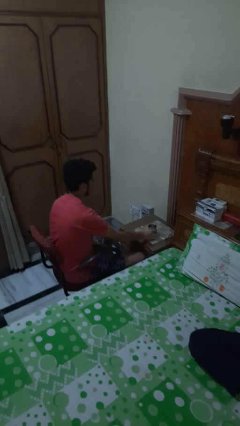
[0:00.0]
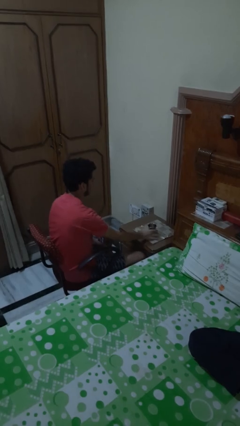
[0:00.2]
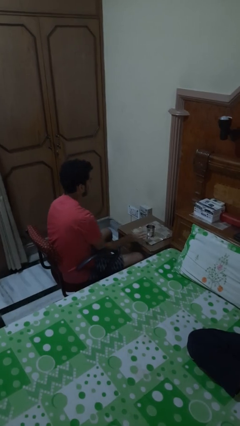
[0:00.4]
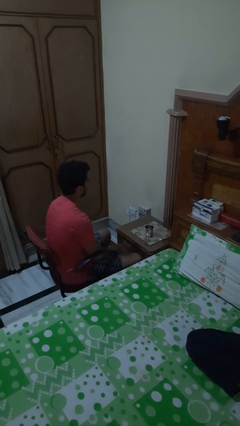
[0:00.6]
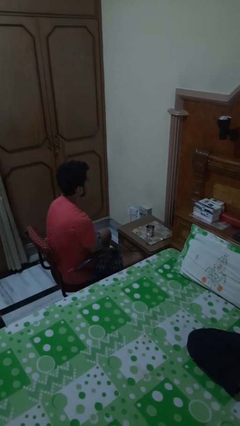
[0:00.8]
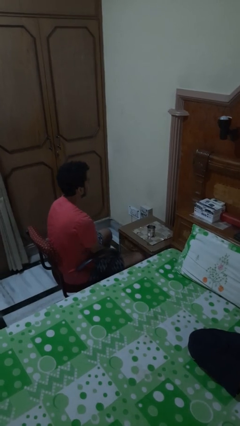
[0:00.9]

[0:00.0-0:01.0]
person sets upright glass

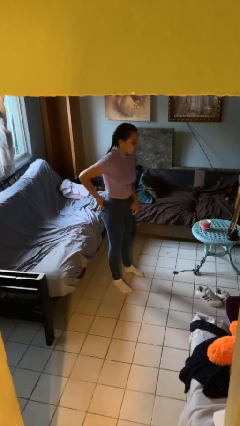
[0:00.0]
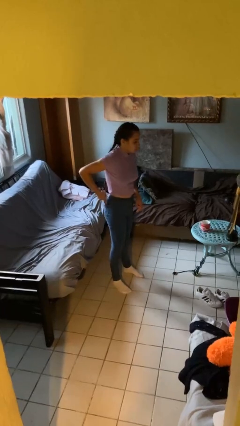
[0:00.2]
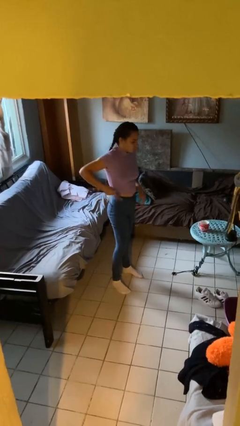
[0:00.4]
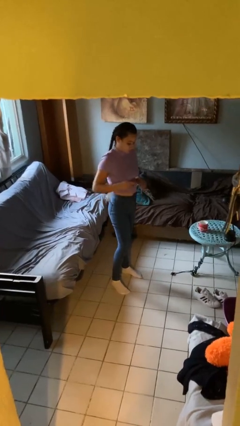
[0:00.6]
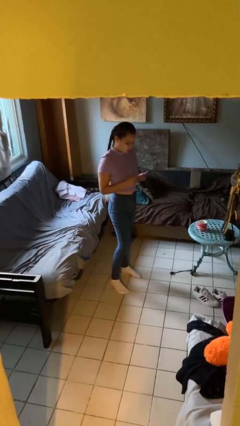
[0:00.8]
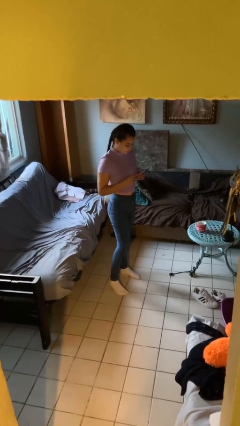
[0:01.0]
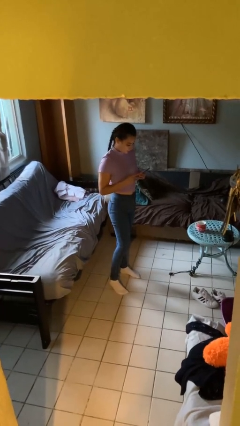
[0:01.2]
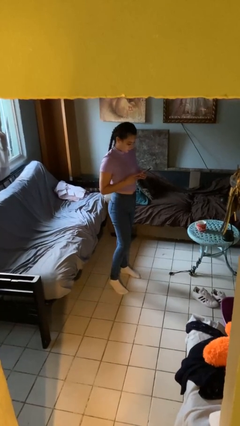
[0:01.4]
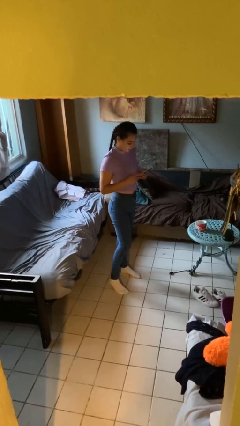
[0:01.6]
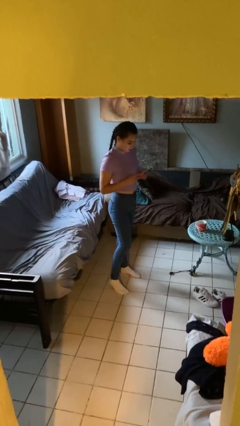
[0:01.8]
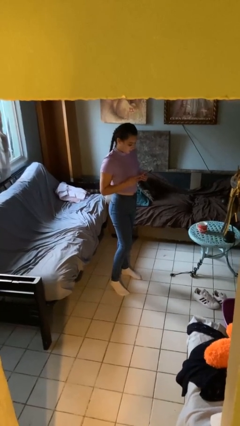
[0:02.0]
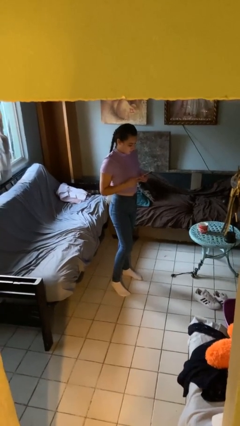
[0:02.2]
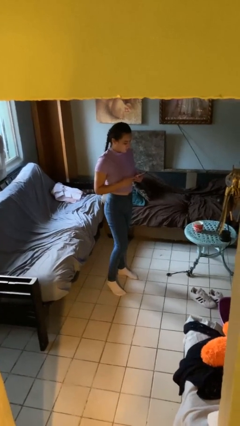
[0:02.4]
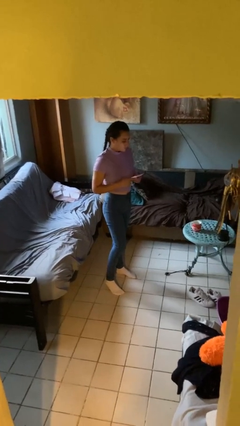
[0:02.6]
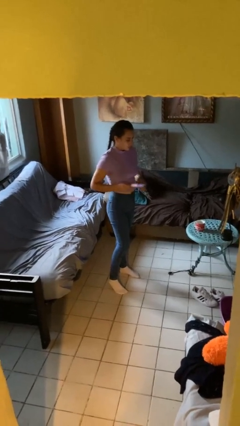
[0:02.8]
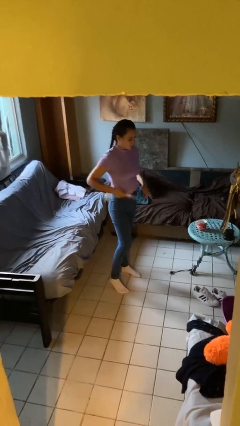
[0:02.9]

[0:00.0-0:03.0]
person takes phone from pocket

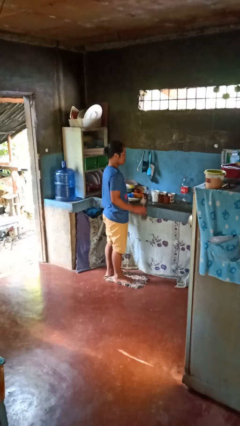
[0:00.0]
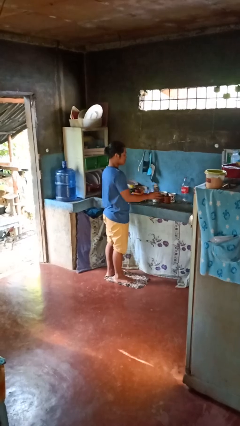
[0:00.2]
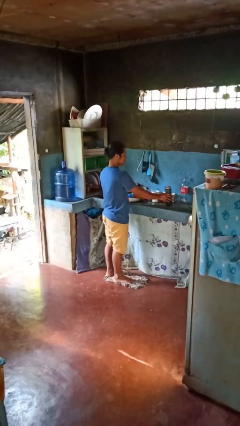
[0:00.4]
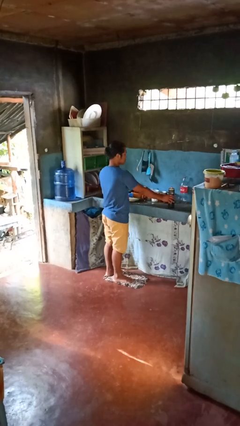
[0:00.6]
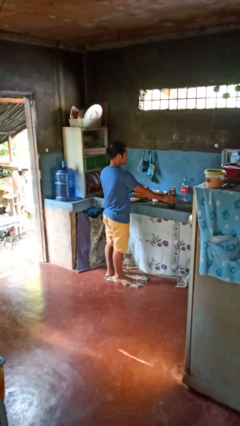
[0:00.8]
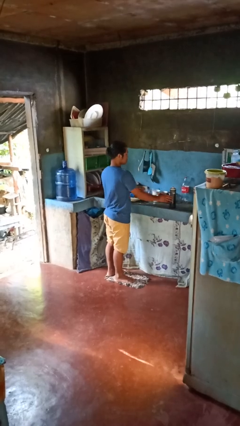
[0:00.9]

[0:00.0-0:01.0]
person puts down object on countertop

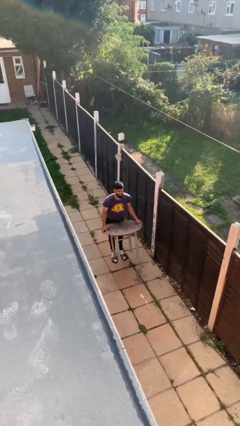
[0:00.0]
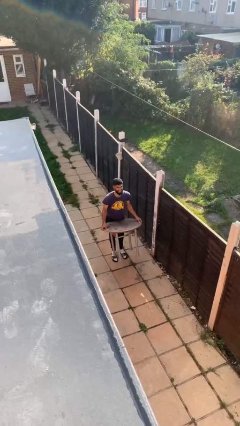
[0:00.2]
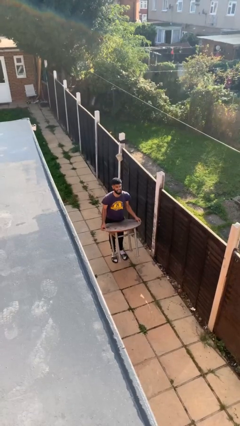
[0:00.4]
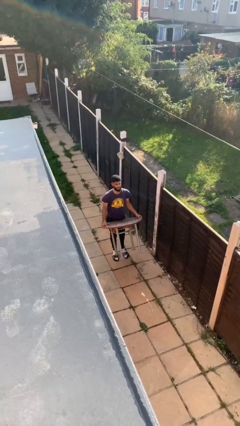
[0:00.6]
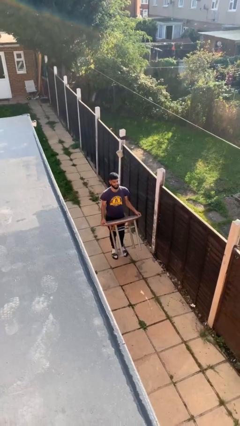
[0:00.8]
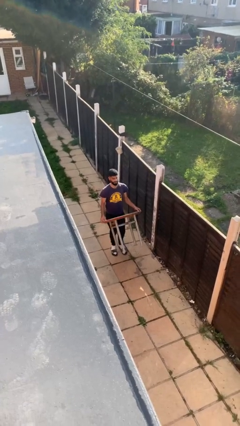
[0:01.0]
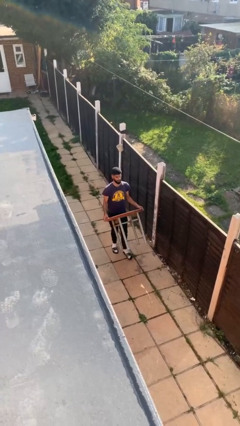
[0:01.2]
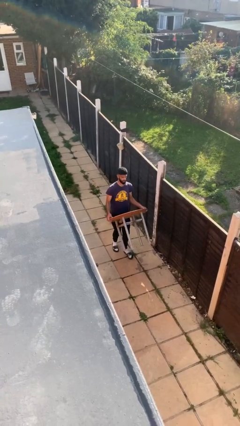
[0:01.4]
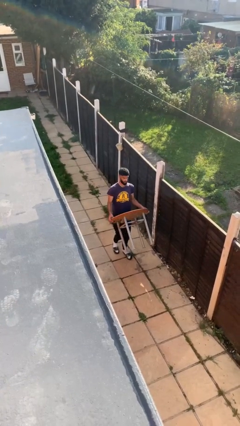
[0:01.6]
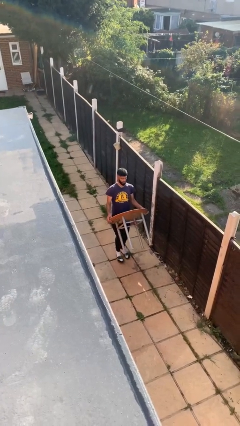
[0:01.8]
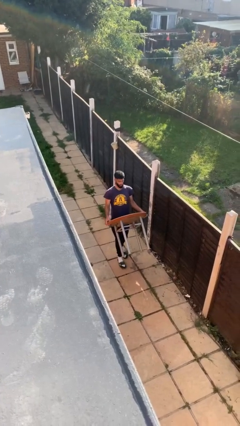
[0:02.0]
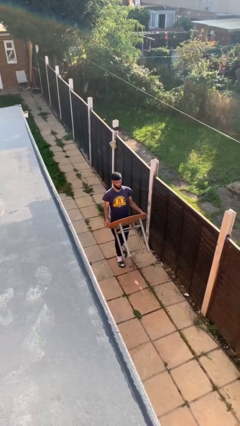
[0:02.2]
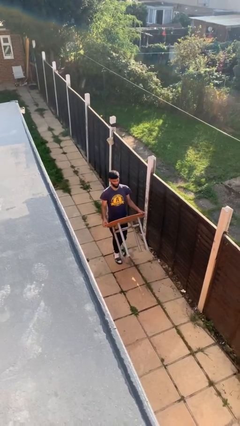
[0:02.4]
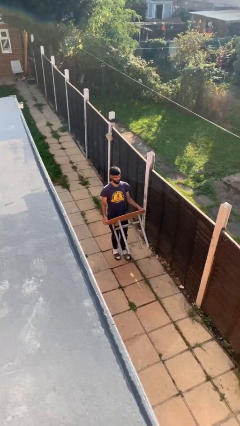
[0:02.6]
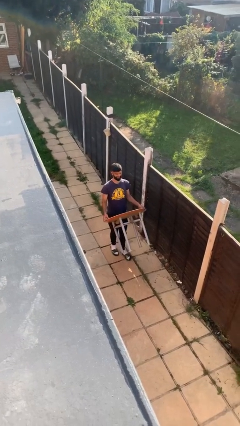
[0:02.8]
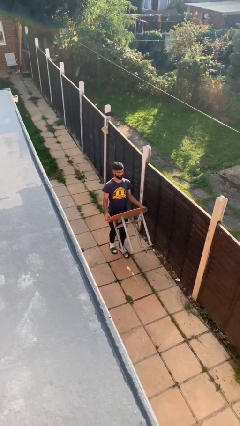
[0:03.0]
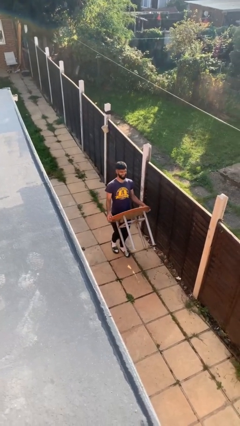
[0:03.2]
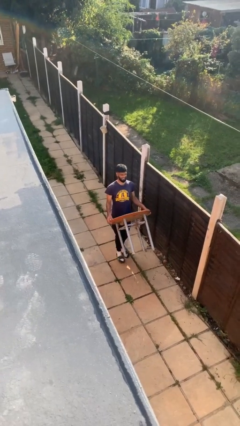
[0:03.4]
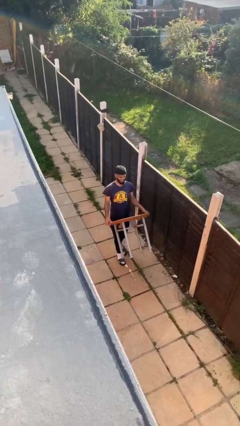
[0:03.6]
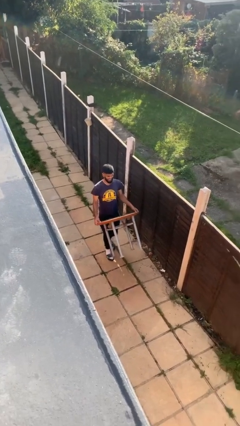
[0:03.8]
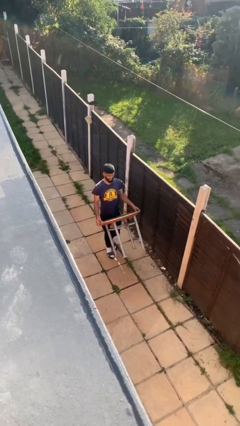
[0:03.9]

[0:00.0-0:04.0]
person carries heavy object

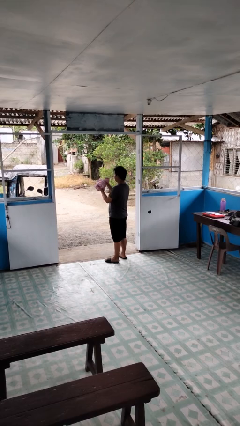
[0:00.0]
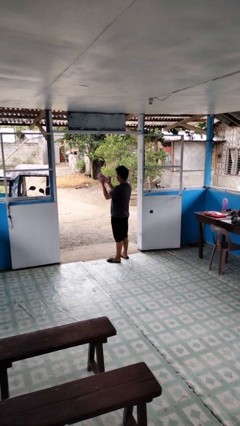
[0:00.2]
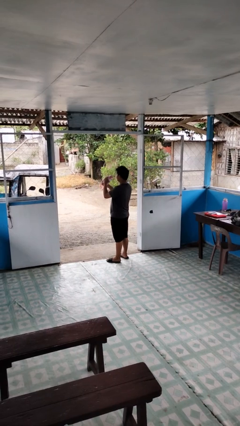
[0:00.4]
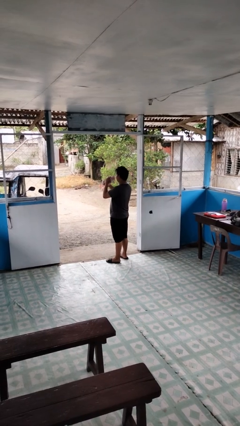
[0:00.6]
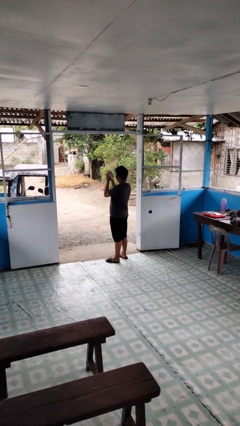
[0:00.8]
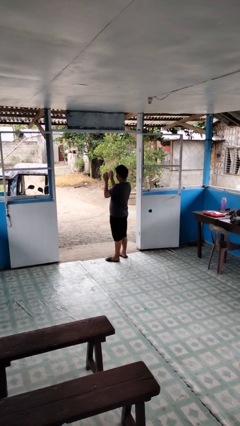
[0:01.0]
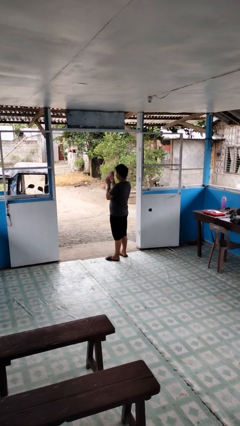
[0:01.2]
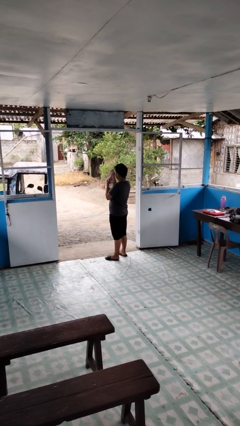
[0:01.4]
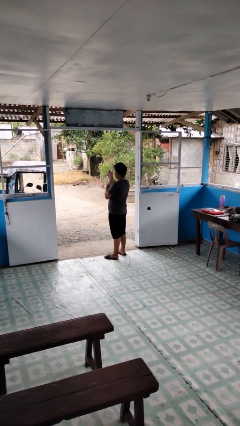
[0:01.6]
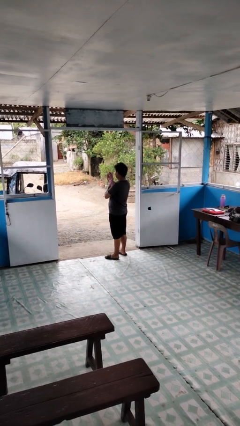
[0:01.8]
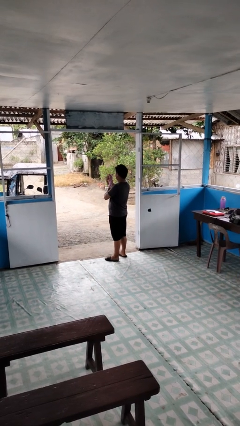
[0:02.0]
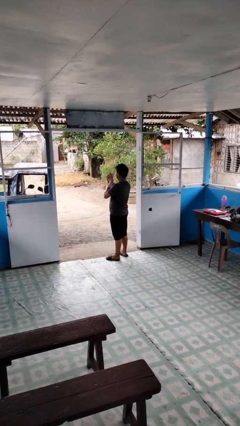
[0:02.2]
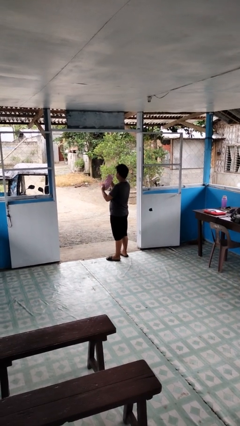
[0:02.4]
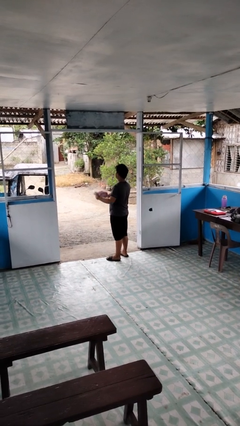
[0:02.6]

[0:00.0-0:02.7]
person squeezes object

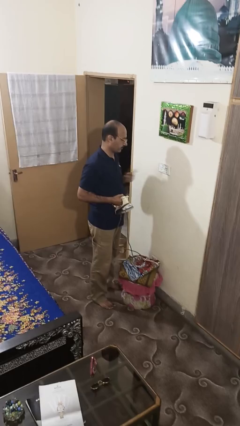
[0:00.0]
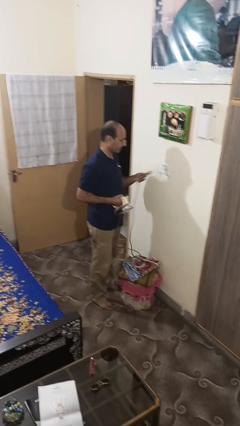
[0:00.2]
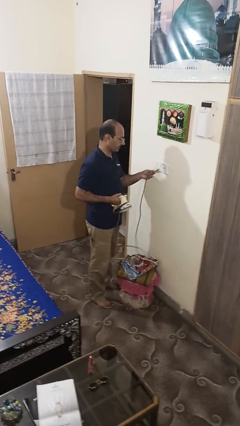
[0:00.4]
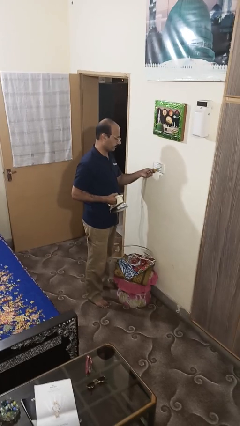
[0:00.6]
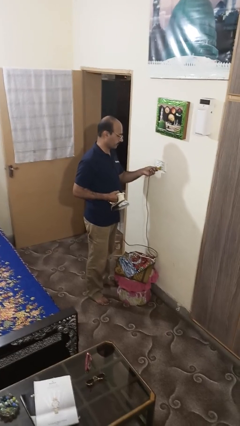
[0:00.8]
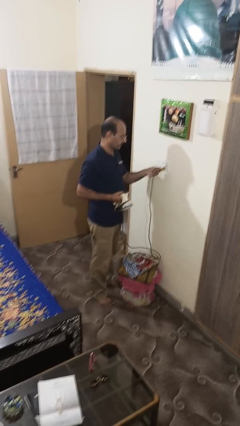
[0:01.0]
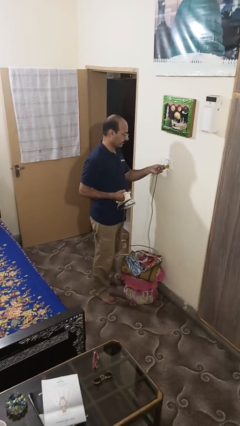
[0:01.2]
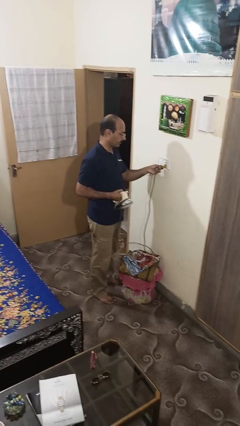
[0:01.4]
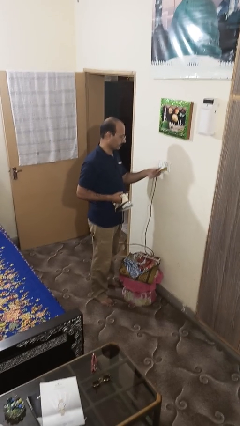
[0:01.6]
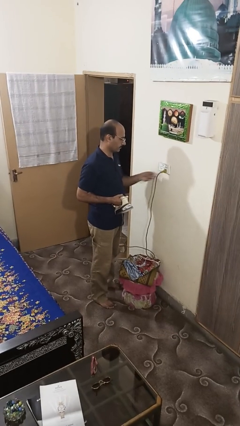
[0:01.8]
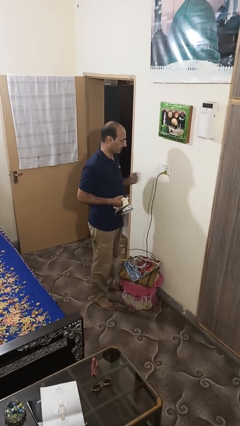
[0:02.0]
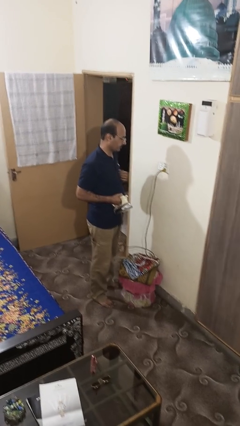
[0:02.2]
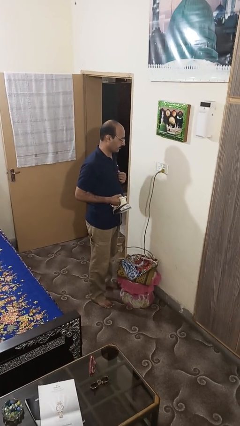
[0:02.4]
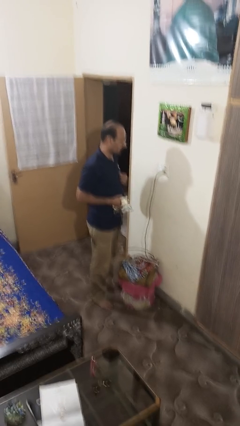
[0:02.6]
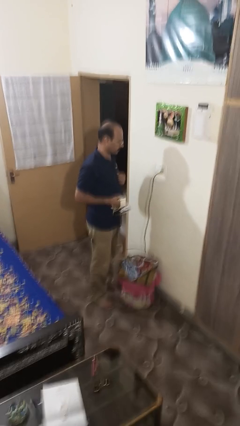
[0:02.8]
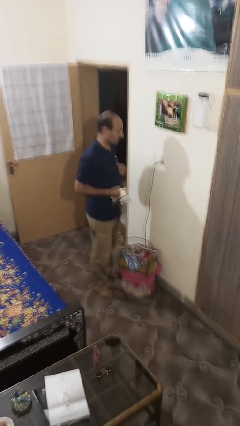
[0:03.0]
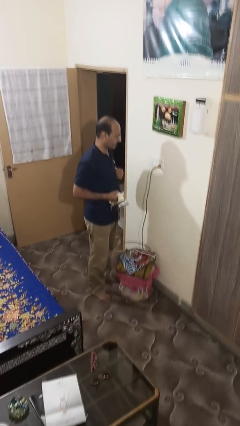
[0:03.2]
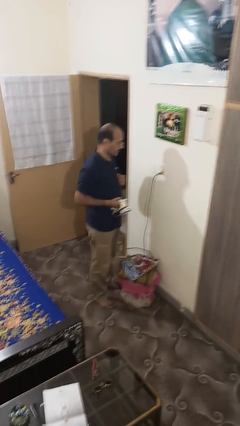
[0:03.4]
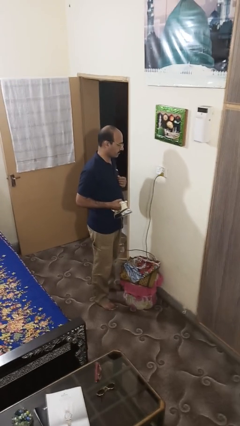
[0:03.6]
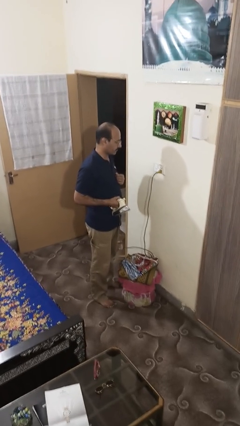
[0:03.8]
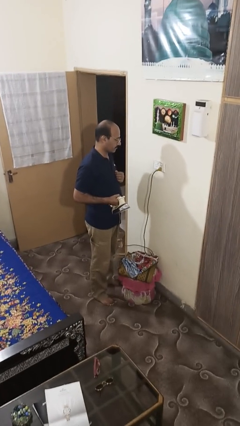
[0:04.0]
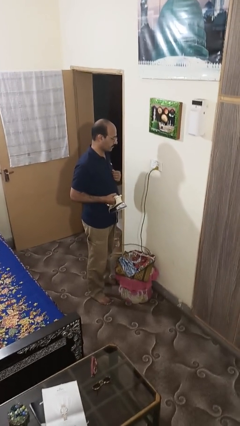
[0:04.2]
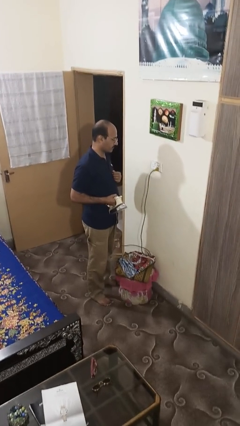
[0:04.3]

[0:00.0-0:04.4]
person plugs into electrical socket

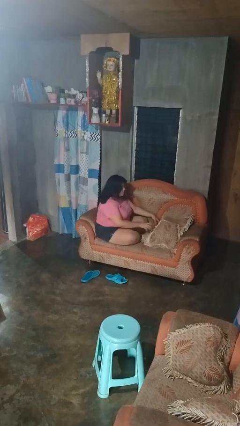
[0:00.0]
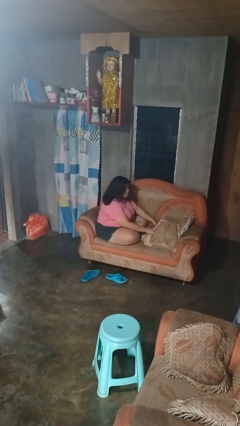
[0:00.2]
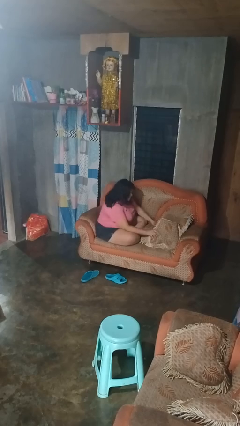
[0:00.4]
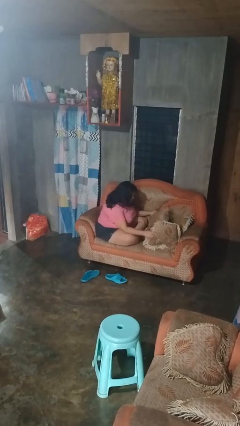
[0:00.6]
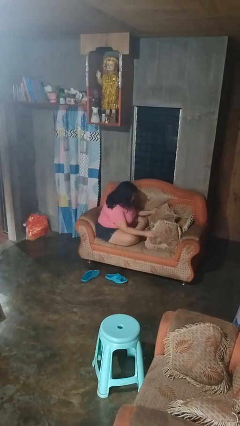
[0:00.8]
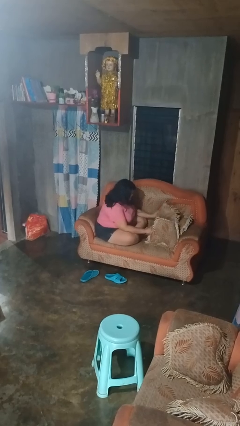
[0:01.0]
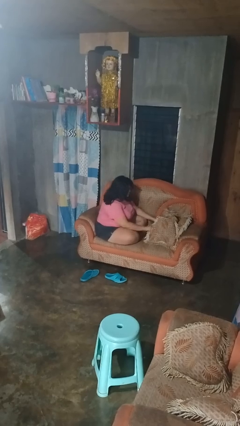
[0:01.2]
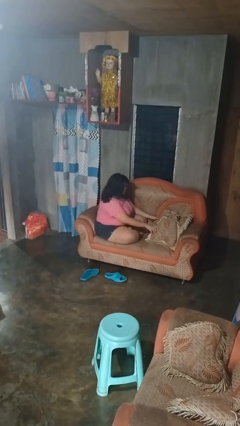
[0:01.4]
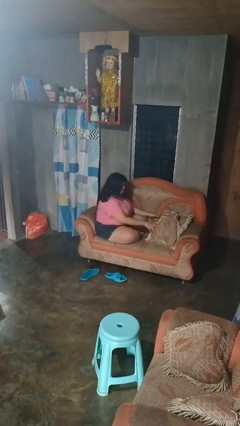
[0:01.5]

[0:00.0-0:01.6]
person searches in couch
